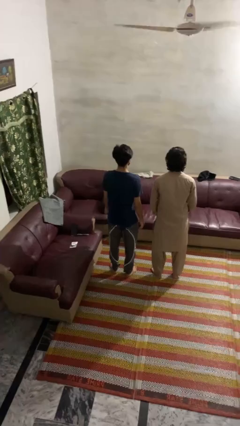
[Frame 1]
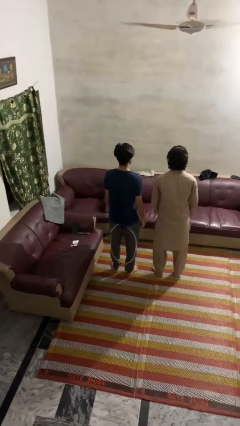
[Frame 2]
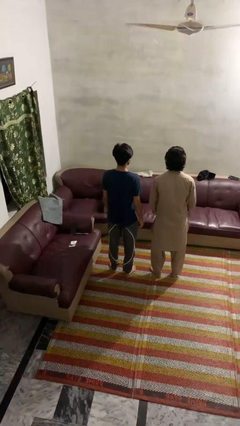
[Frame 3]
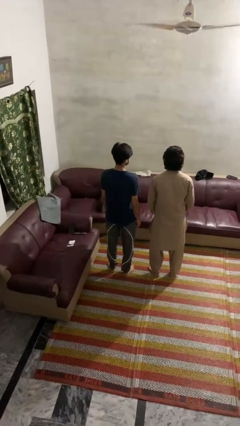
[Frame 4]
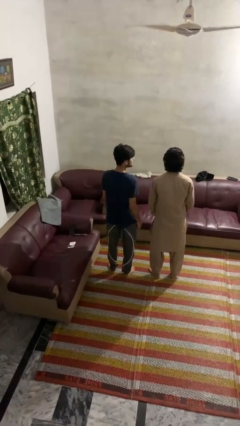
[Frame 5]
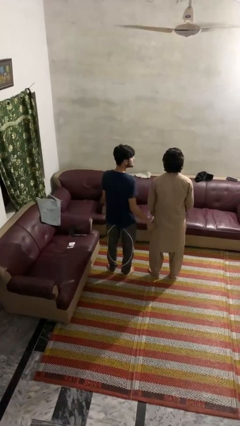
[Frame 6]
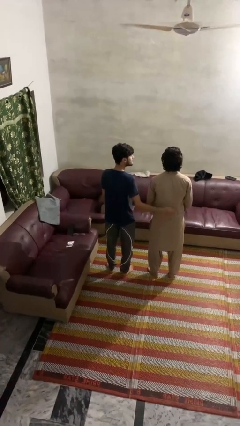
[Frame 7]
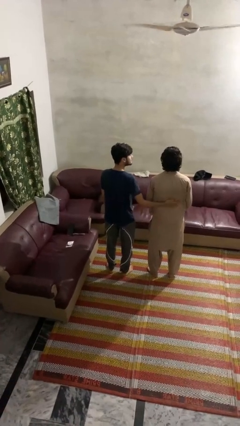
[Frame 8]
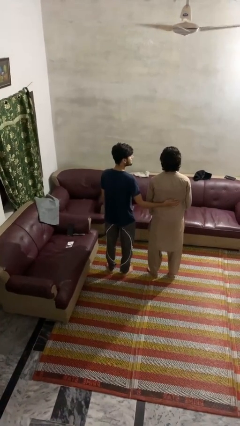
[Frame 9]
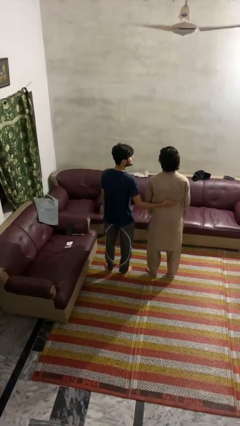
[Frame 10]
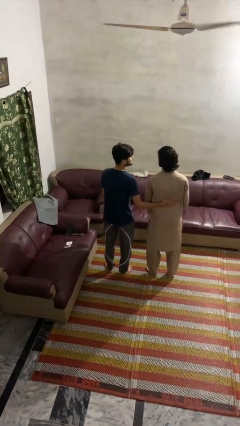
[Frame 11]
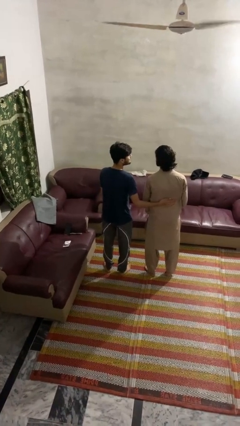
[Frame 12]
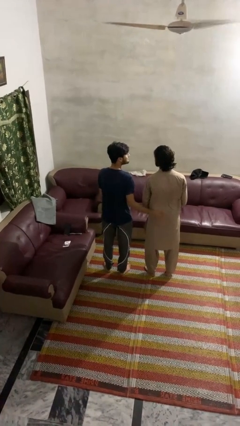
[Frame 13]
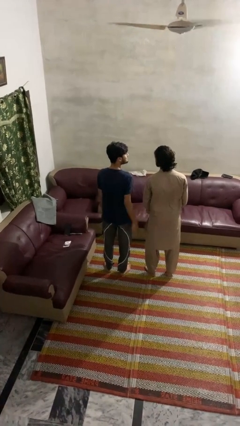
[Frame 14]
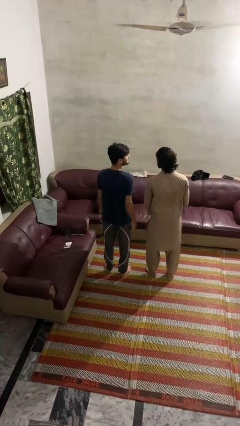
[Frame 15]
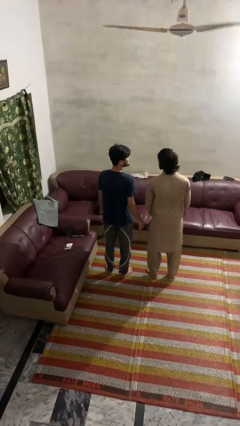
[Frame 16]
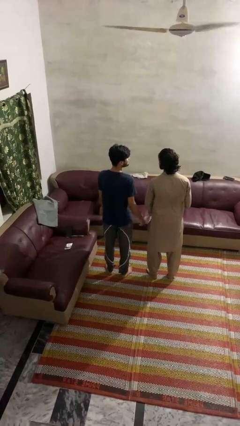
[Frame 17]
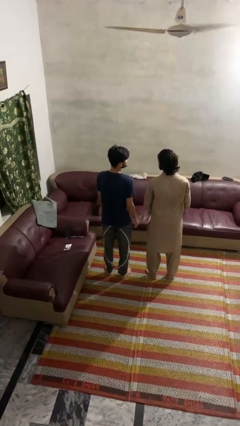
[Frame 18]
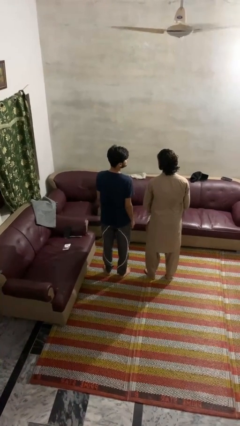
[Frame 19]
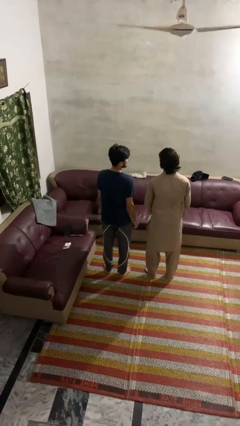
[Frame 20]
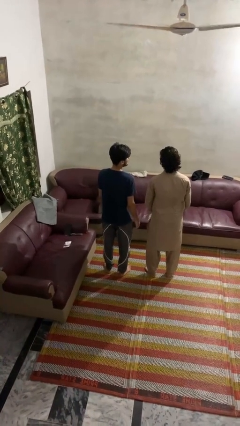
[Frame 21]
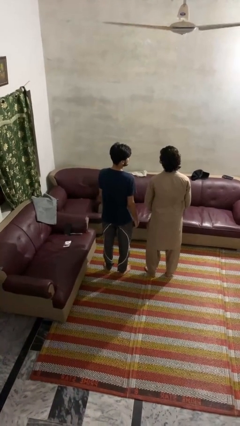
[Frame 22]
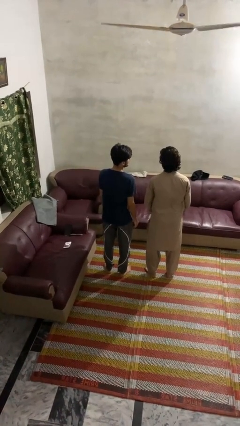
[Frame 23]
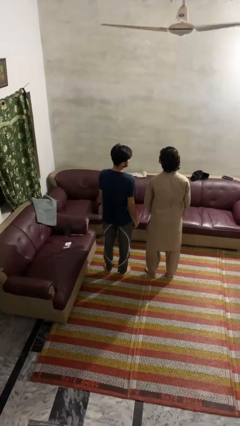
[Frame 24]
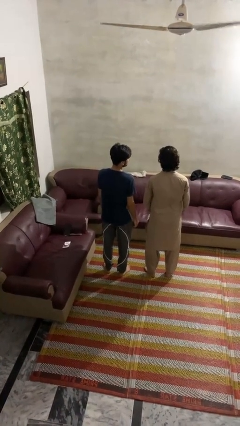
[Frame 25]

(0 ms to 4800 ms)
person touches back of person

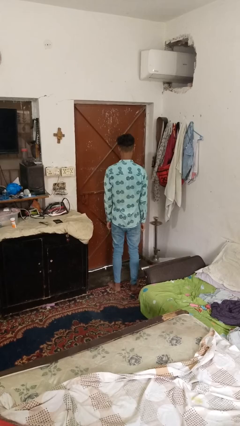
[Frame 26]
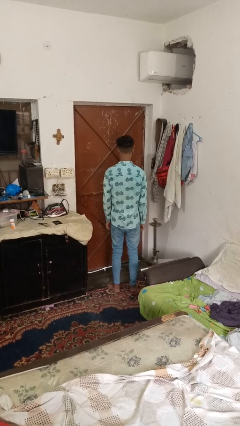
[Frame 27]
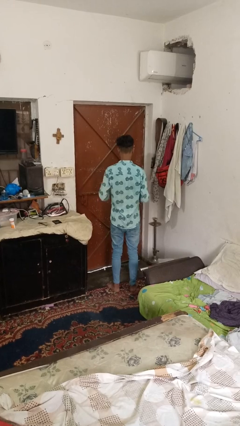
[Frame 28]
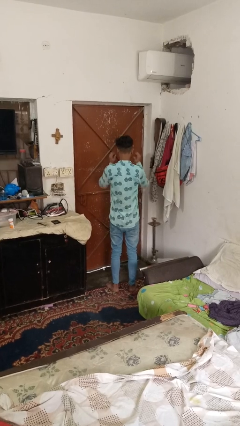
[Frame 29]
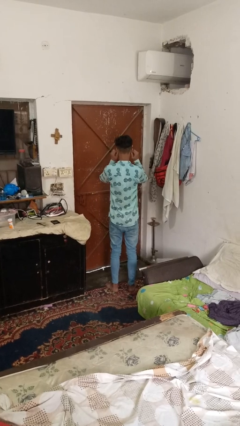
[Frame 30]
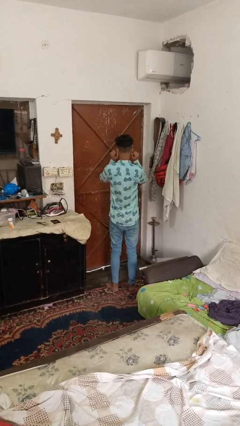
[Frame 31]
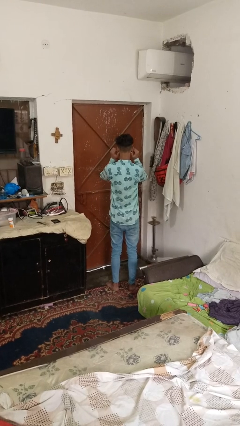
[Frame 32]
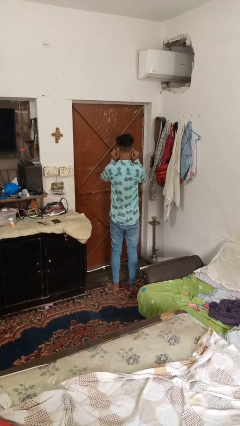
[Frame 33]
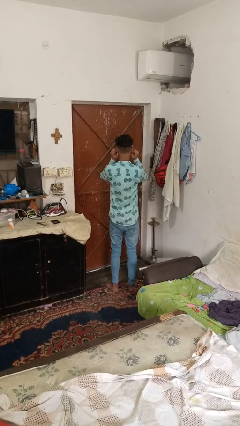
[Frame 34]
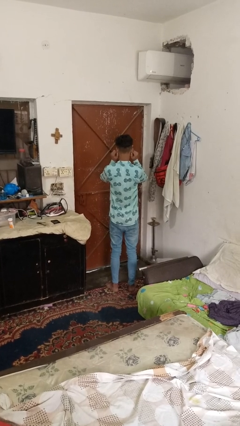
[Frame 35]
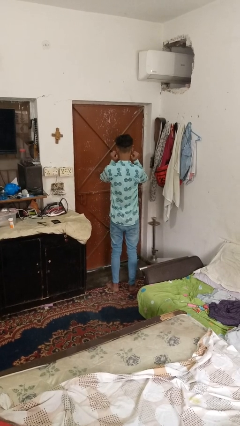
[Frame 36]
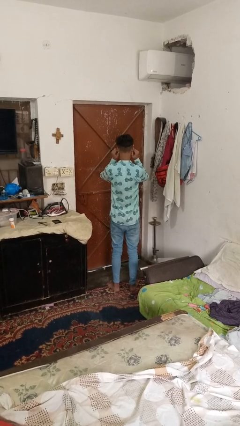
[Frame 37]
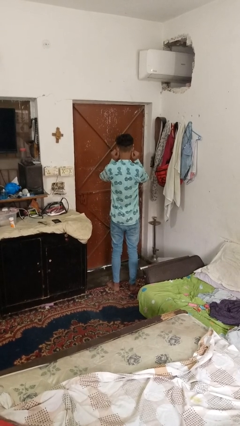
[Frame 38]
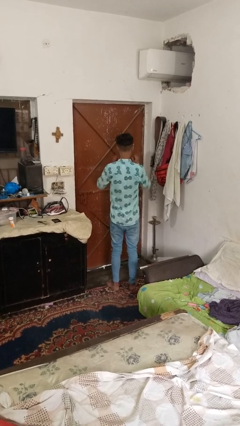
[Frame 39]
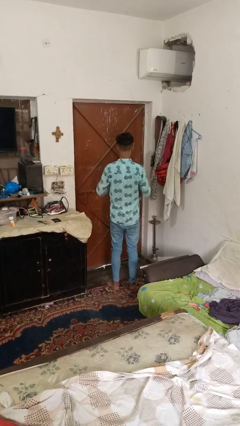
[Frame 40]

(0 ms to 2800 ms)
person touches earlobe

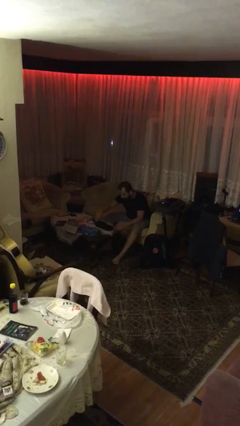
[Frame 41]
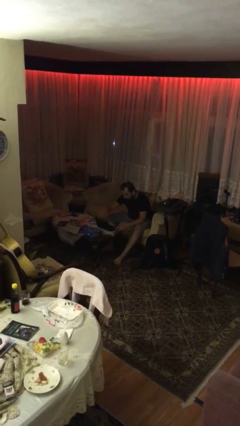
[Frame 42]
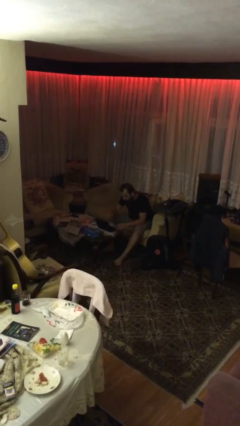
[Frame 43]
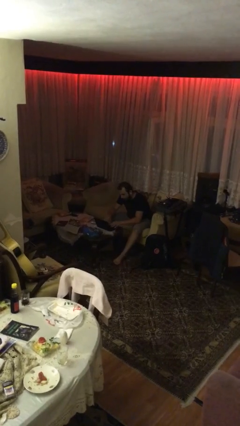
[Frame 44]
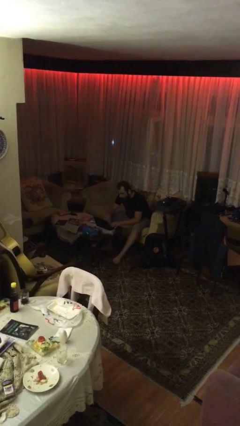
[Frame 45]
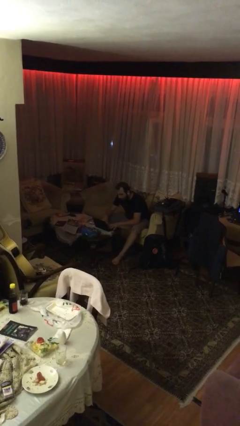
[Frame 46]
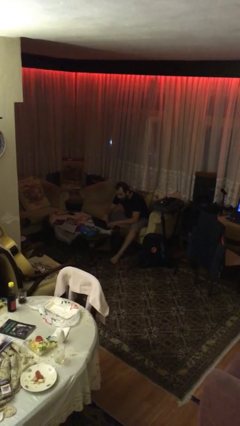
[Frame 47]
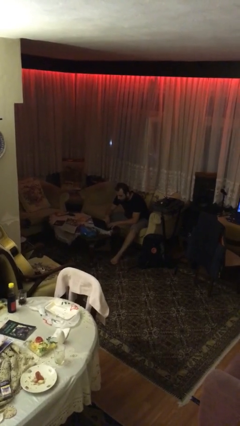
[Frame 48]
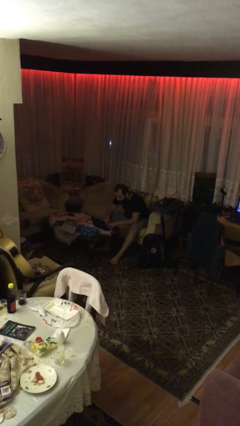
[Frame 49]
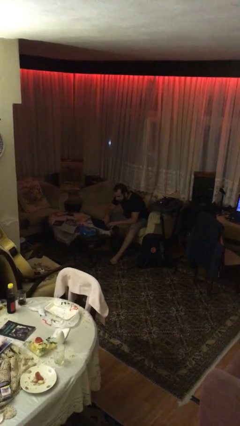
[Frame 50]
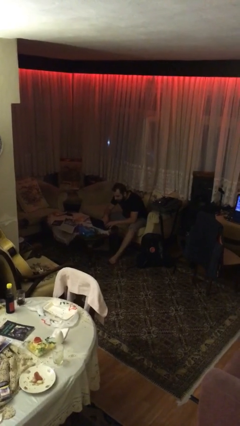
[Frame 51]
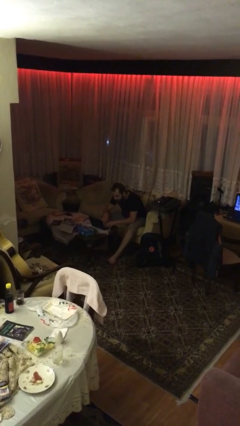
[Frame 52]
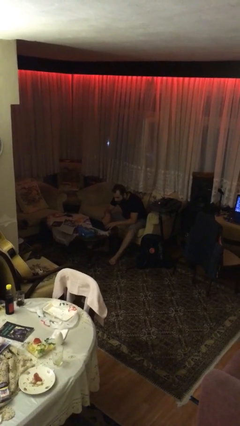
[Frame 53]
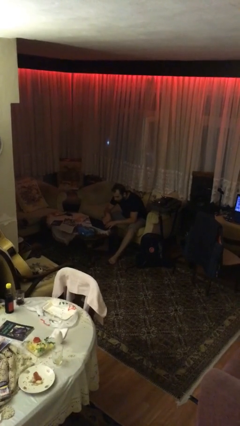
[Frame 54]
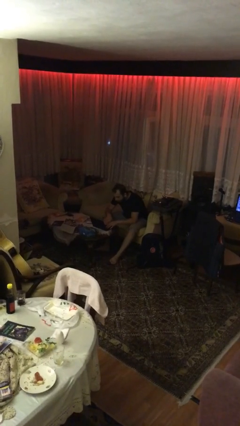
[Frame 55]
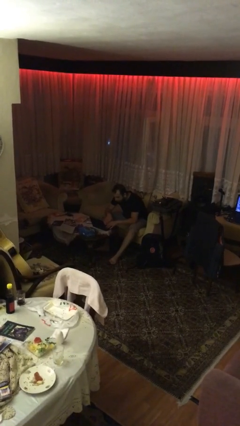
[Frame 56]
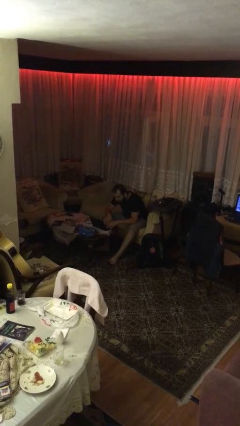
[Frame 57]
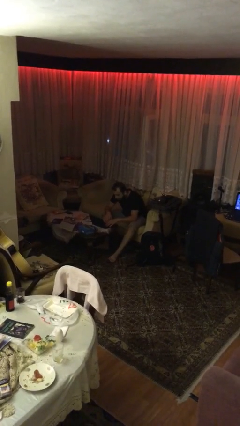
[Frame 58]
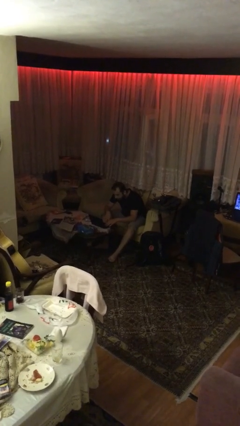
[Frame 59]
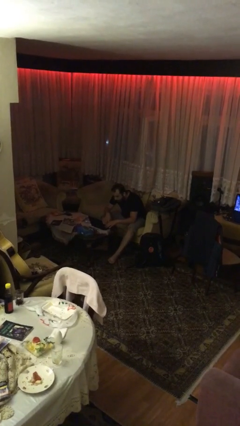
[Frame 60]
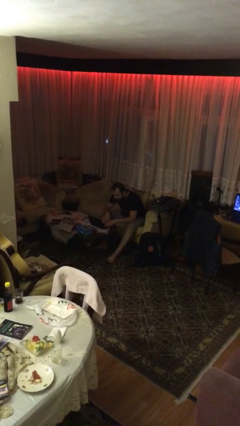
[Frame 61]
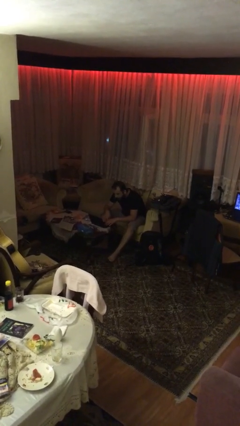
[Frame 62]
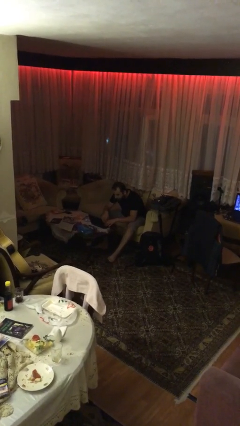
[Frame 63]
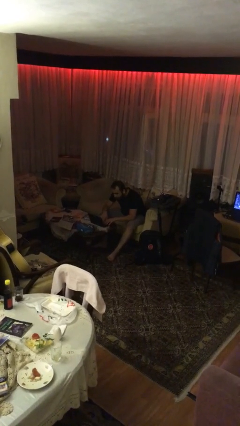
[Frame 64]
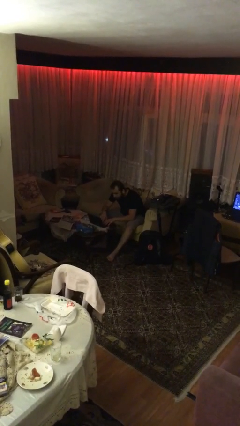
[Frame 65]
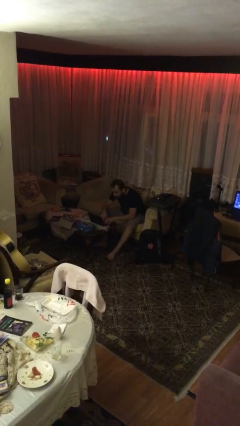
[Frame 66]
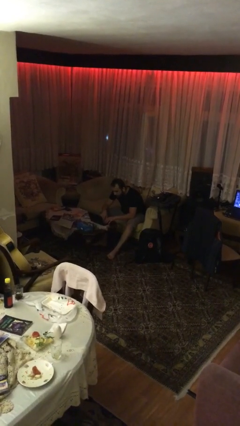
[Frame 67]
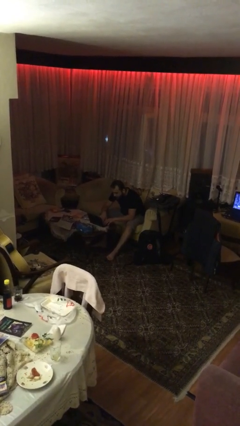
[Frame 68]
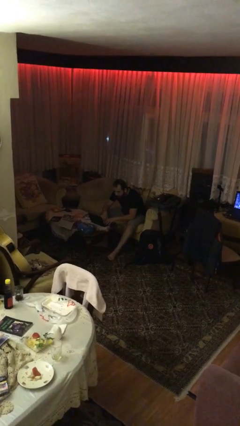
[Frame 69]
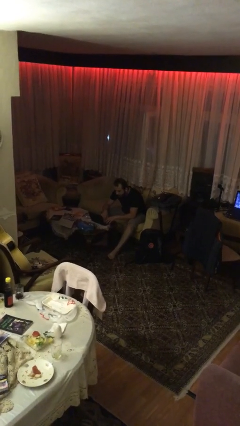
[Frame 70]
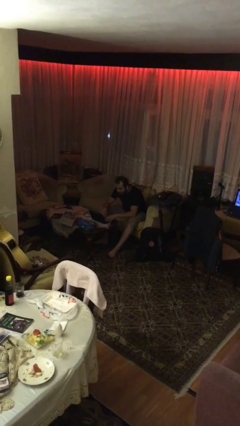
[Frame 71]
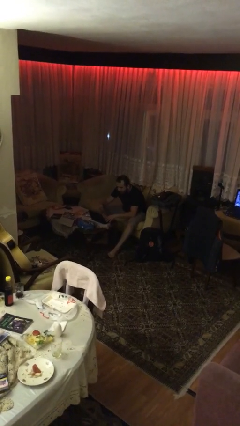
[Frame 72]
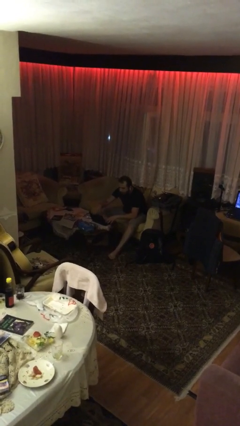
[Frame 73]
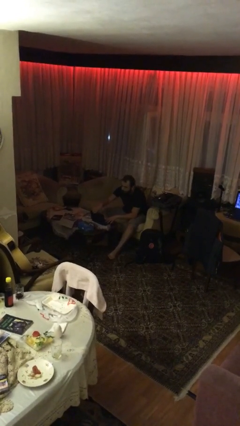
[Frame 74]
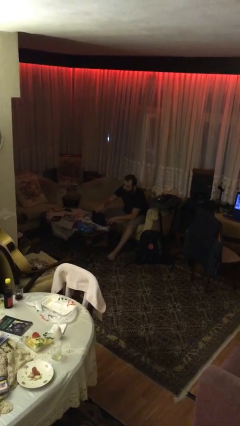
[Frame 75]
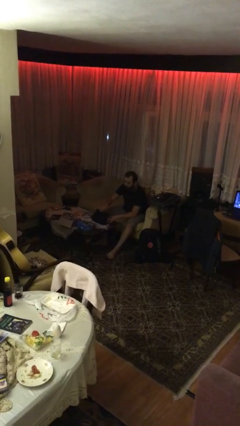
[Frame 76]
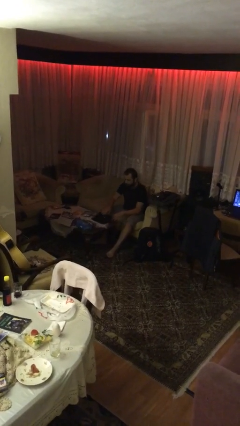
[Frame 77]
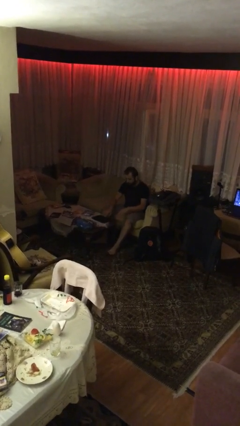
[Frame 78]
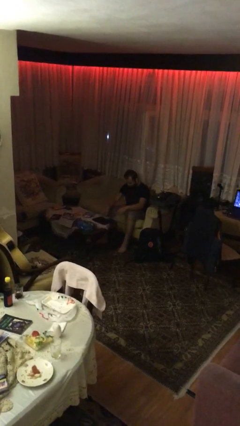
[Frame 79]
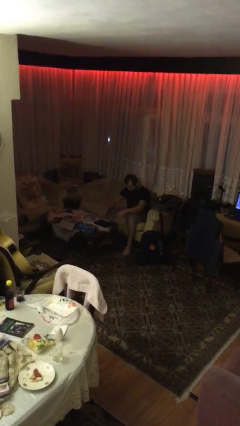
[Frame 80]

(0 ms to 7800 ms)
person interacts with laptop

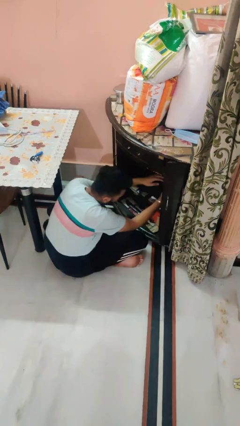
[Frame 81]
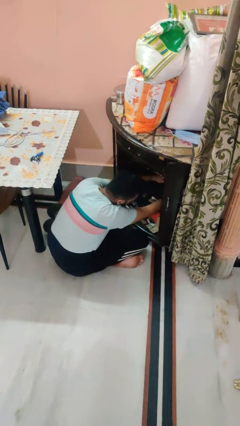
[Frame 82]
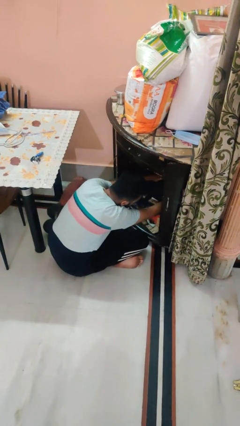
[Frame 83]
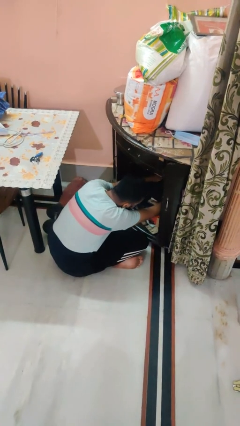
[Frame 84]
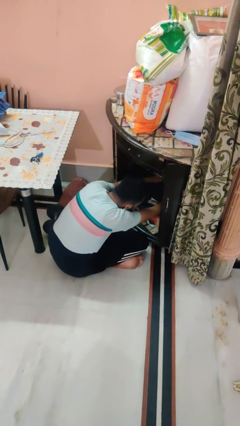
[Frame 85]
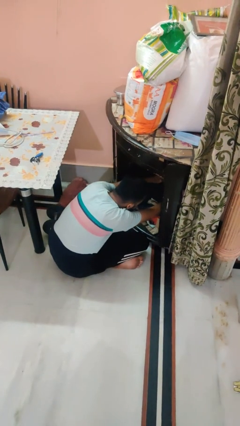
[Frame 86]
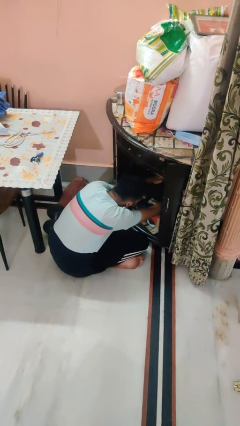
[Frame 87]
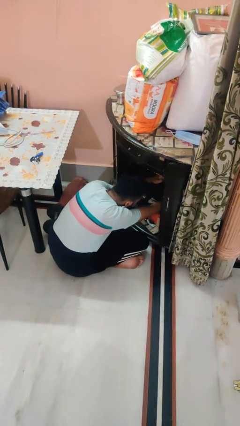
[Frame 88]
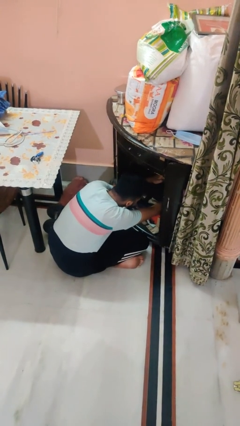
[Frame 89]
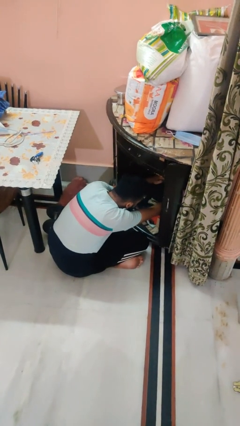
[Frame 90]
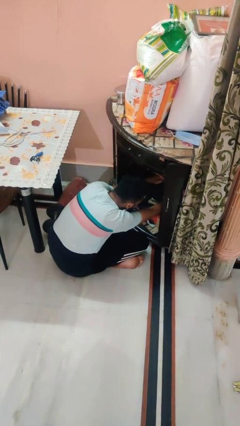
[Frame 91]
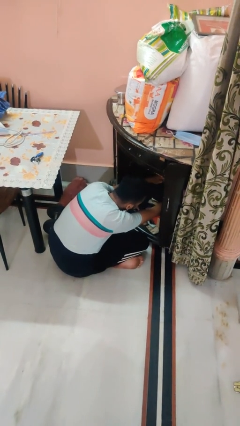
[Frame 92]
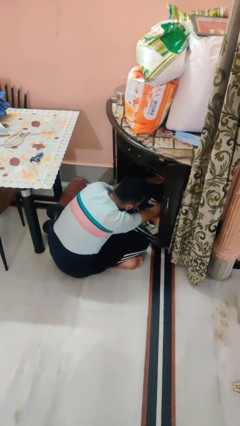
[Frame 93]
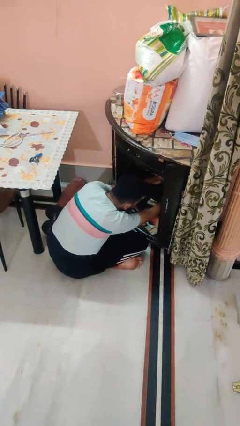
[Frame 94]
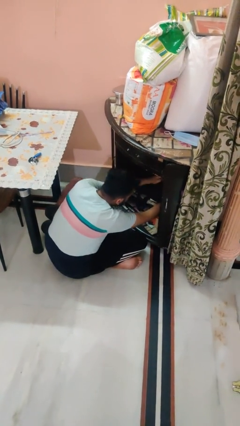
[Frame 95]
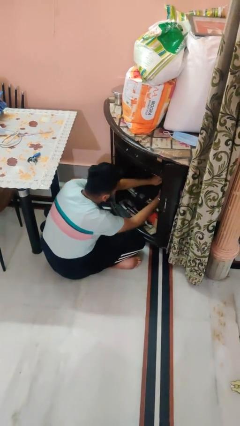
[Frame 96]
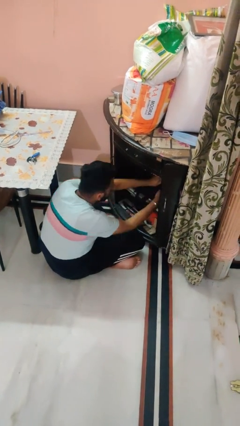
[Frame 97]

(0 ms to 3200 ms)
person searches in cabinet
